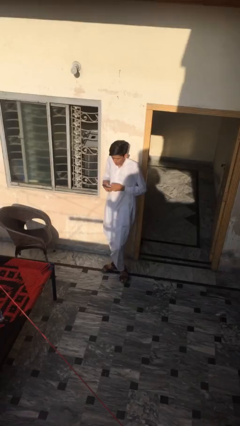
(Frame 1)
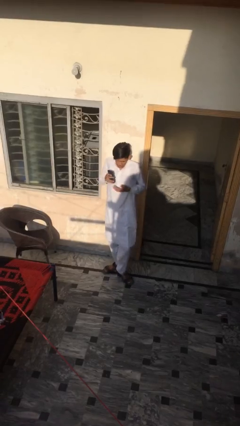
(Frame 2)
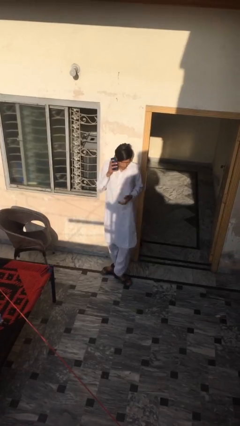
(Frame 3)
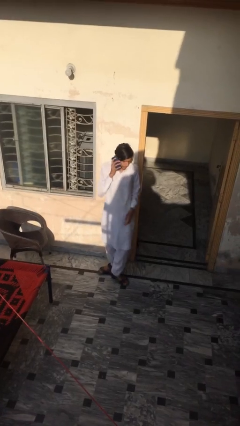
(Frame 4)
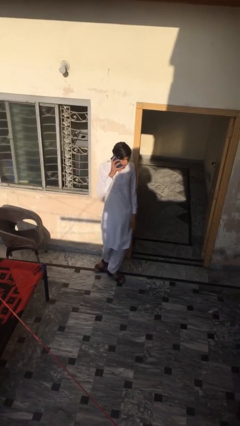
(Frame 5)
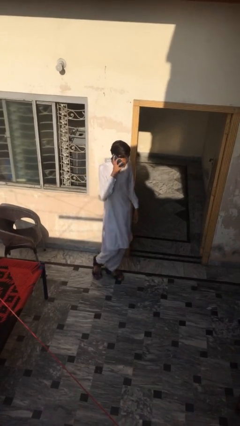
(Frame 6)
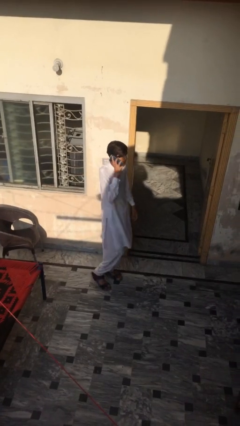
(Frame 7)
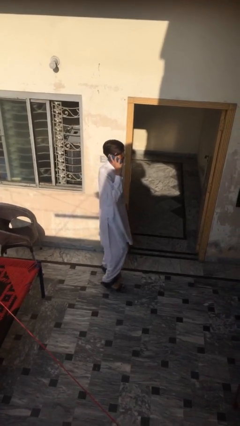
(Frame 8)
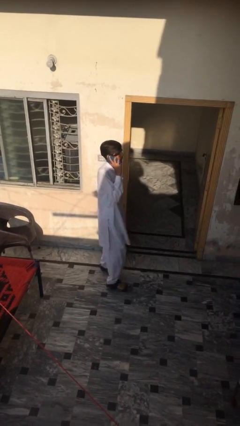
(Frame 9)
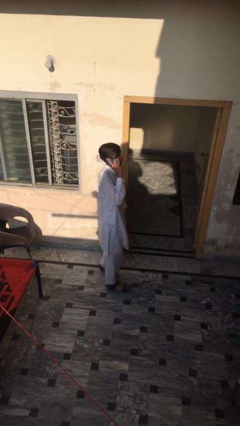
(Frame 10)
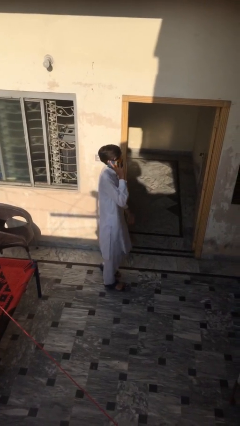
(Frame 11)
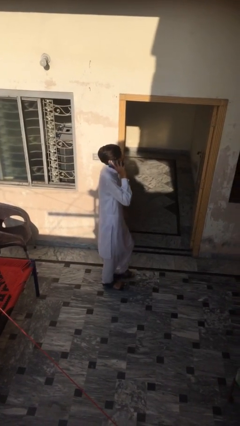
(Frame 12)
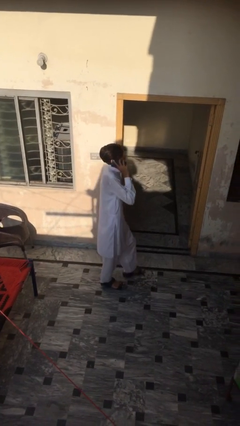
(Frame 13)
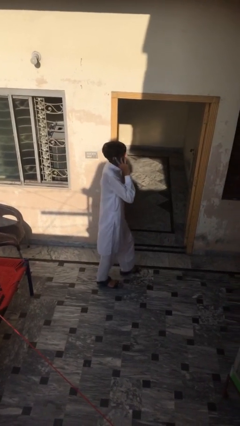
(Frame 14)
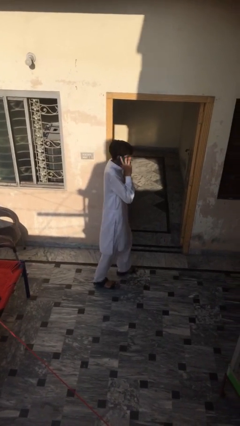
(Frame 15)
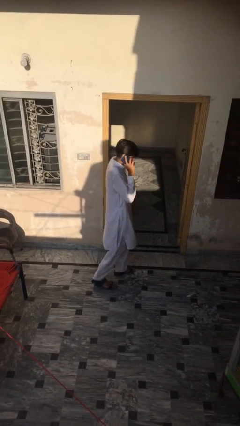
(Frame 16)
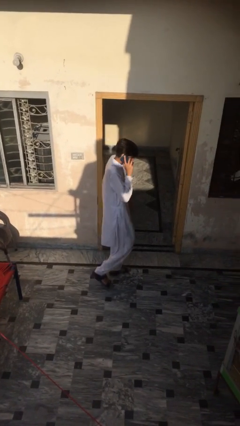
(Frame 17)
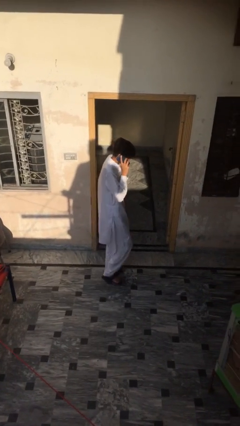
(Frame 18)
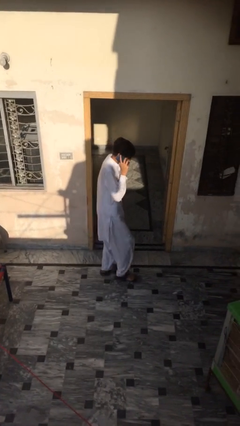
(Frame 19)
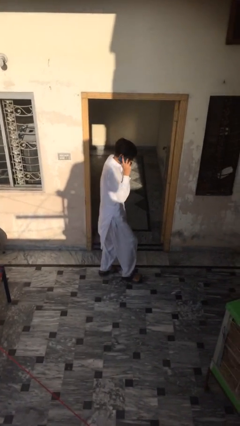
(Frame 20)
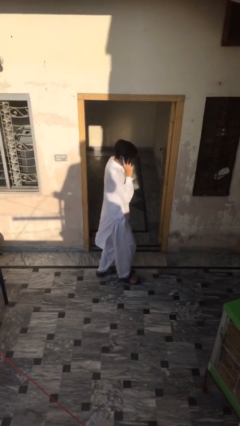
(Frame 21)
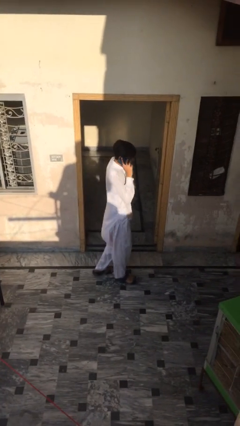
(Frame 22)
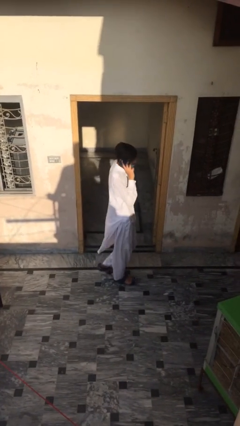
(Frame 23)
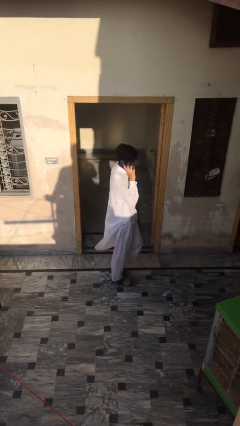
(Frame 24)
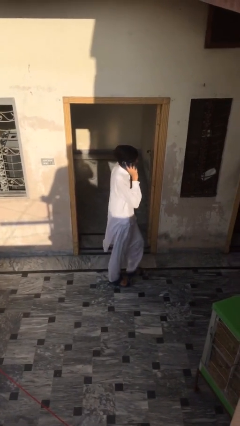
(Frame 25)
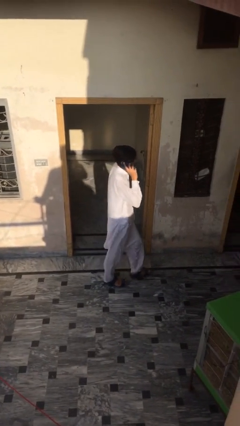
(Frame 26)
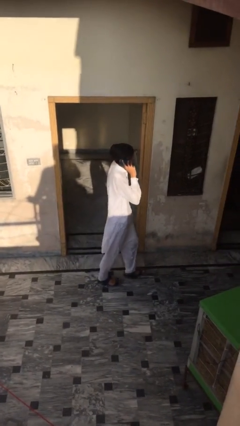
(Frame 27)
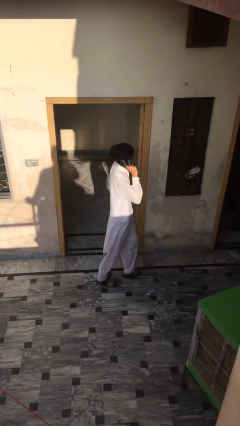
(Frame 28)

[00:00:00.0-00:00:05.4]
person talks on phone

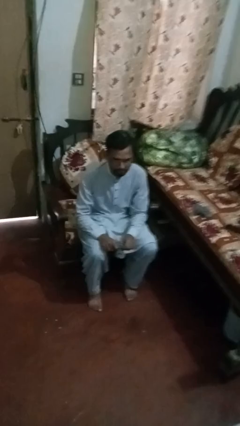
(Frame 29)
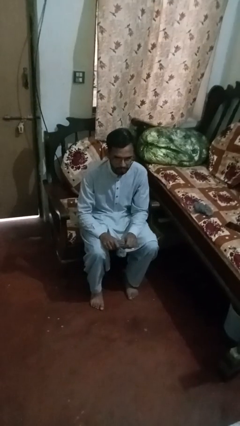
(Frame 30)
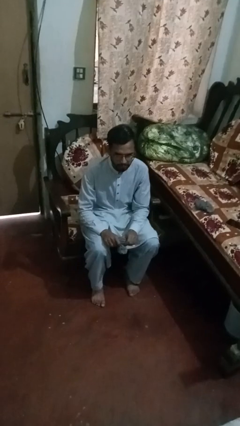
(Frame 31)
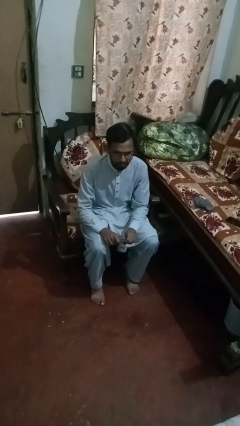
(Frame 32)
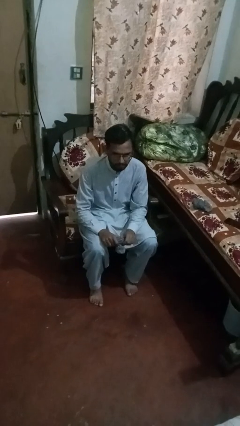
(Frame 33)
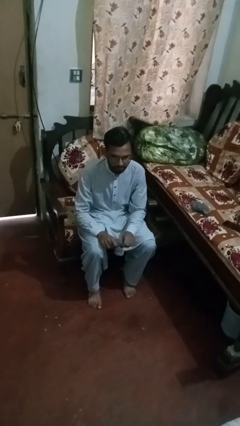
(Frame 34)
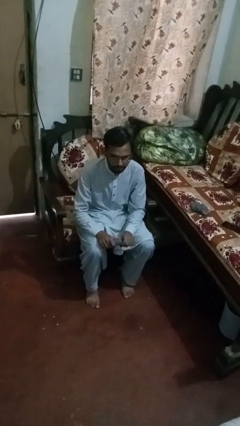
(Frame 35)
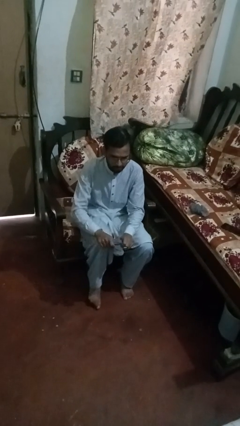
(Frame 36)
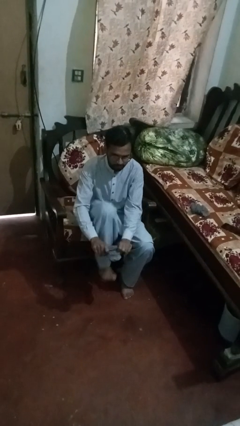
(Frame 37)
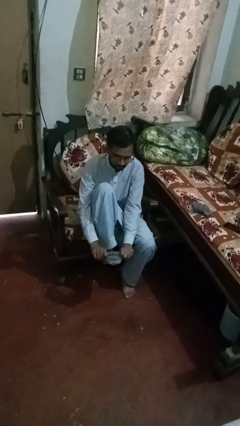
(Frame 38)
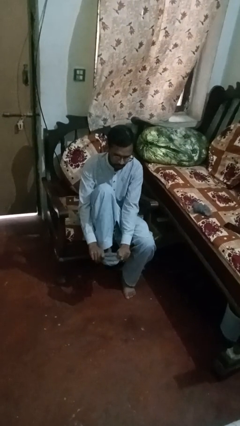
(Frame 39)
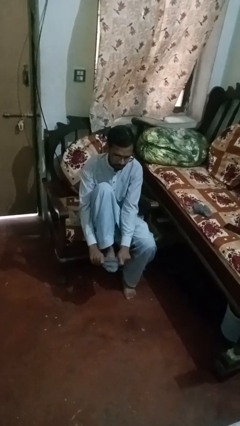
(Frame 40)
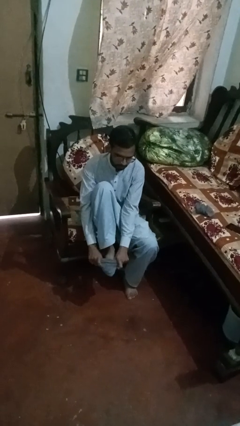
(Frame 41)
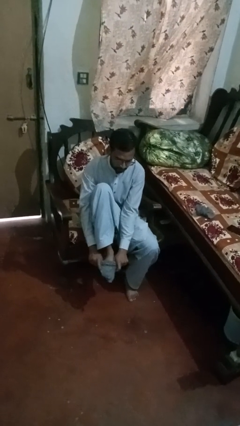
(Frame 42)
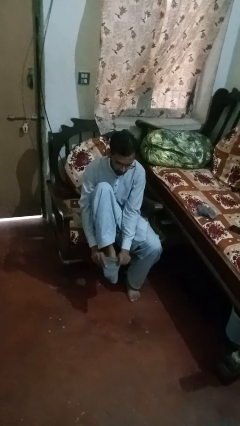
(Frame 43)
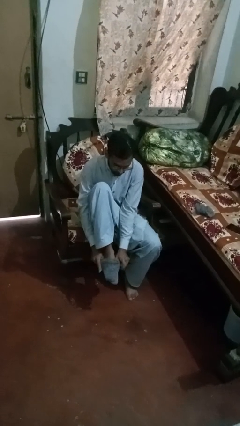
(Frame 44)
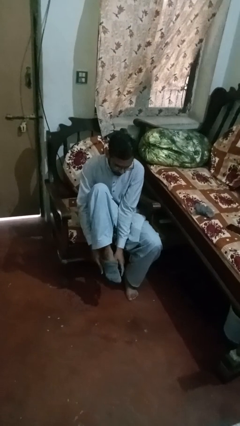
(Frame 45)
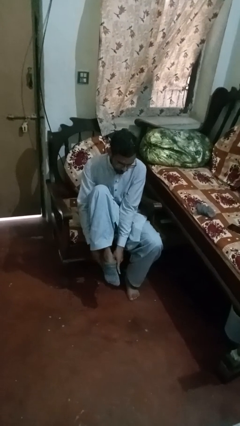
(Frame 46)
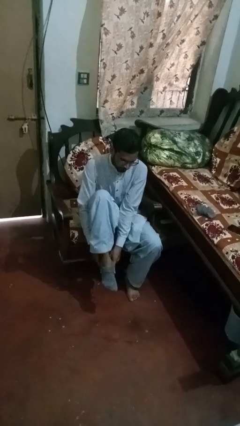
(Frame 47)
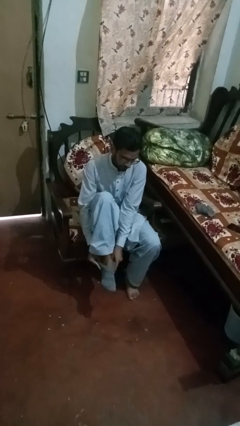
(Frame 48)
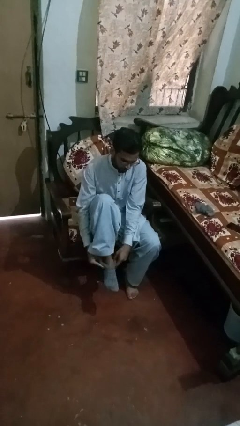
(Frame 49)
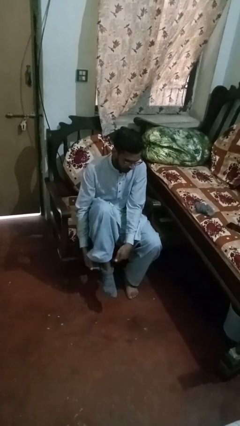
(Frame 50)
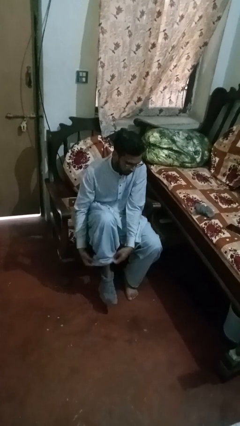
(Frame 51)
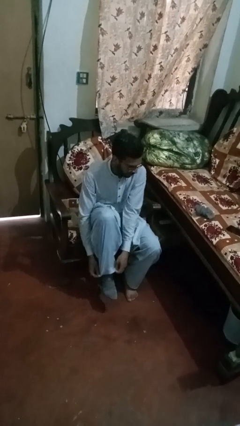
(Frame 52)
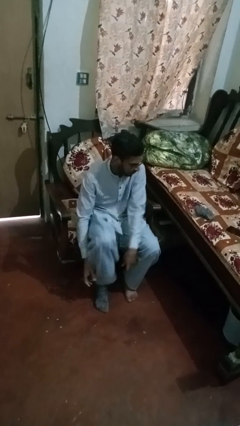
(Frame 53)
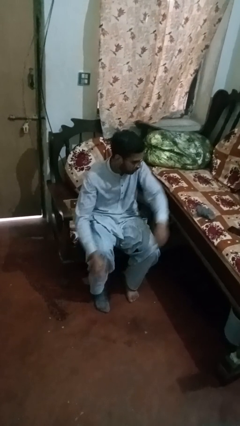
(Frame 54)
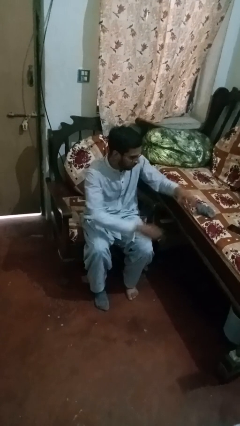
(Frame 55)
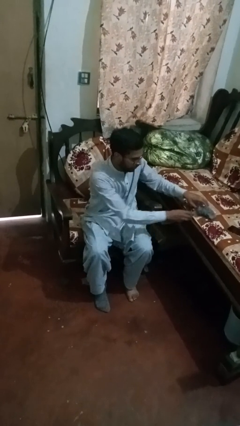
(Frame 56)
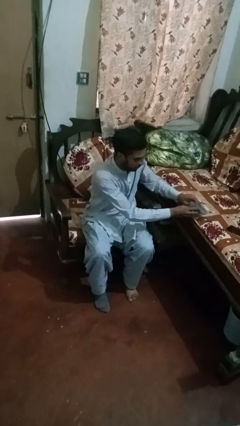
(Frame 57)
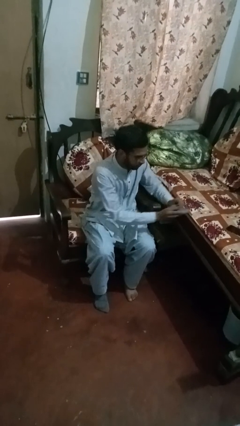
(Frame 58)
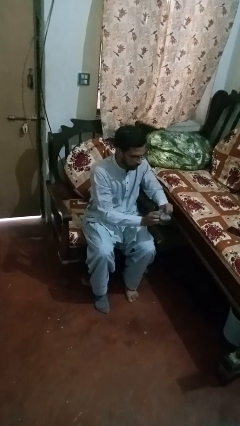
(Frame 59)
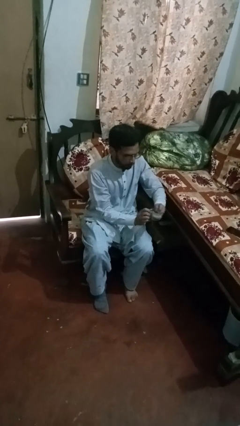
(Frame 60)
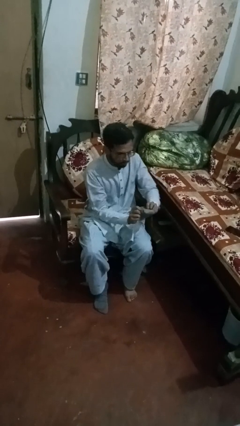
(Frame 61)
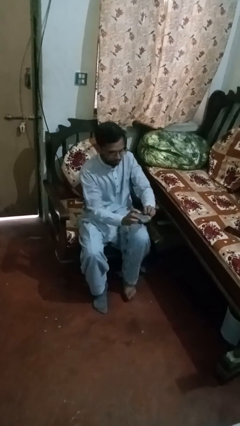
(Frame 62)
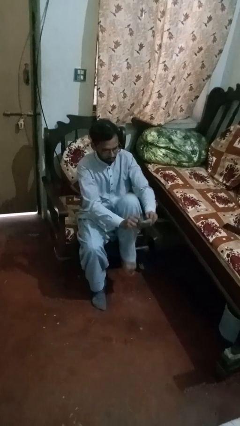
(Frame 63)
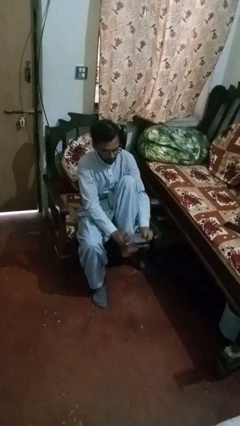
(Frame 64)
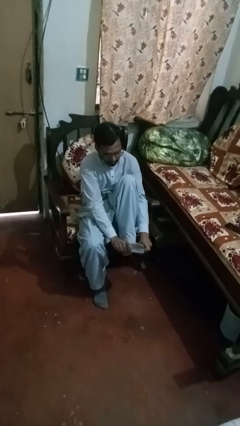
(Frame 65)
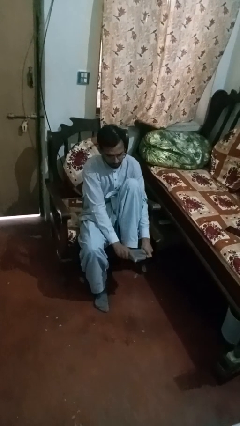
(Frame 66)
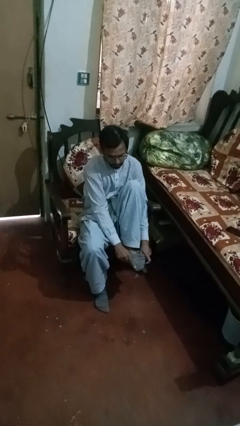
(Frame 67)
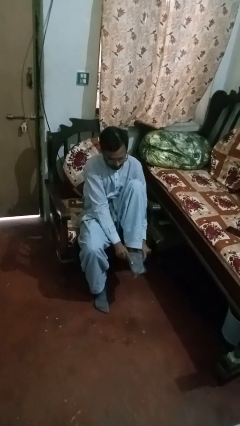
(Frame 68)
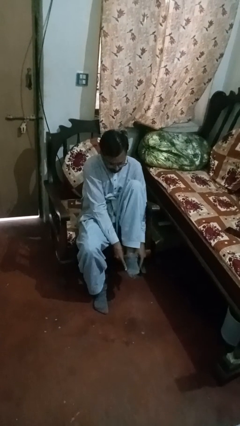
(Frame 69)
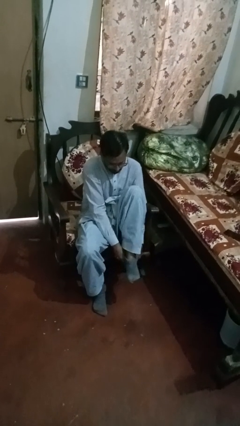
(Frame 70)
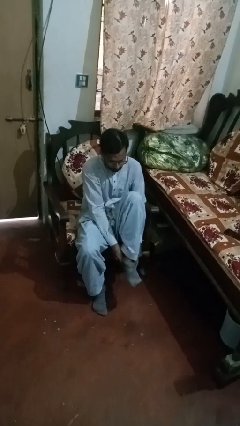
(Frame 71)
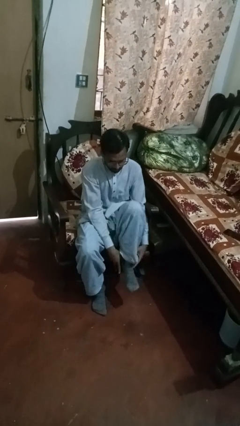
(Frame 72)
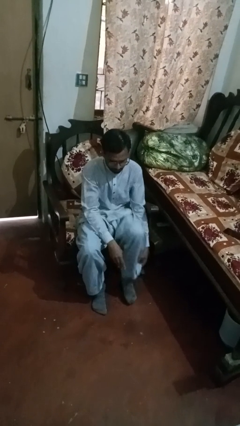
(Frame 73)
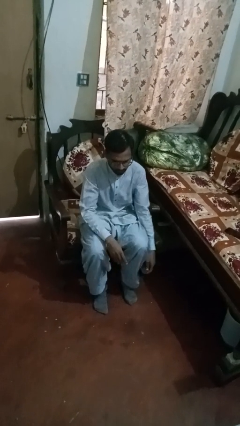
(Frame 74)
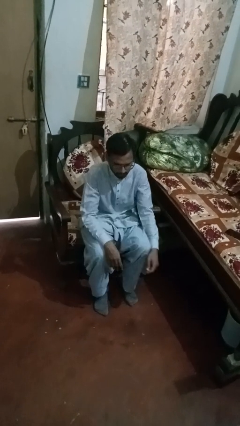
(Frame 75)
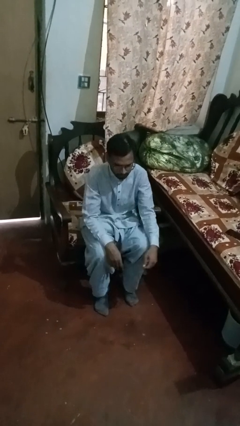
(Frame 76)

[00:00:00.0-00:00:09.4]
person puts on socks

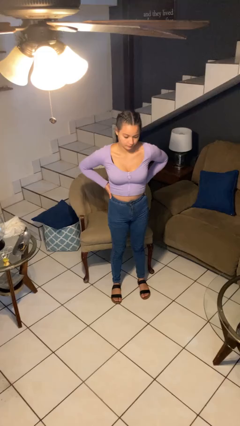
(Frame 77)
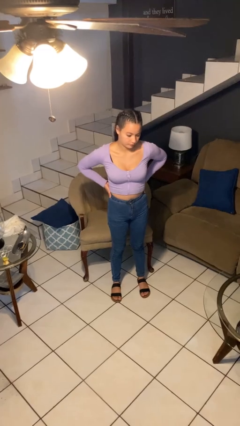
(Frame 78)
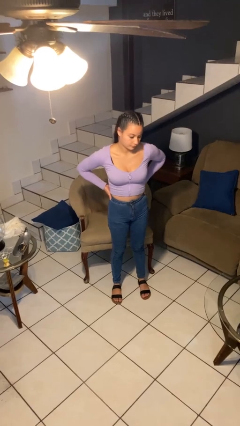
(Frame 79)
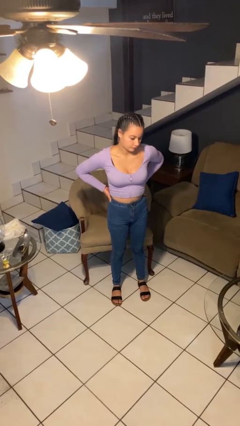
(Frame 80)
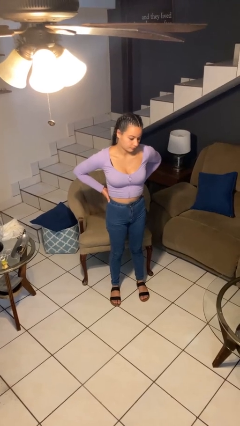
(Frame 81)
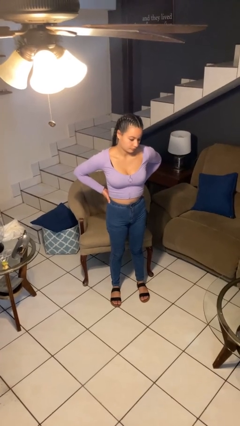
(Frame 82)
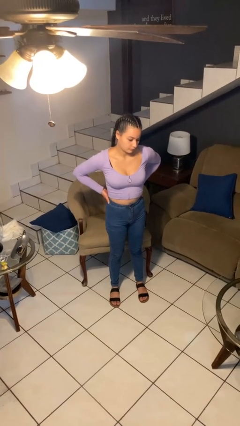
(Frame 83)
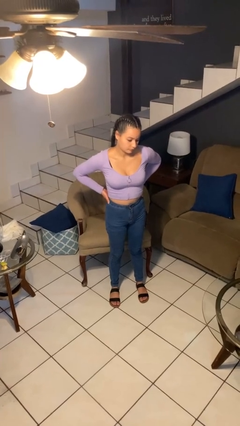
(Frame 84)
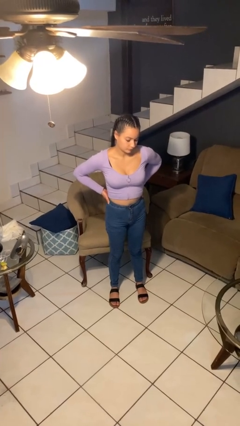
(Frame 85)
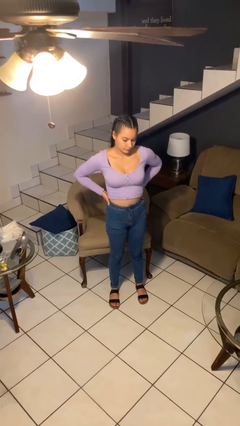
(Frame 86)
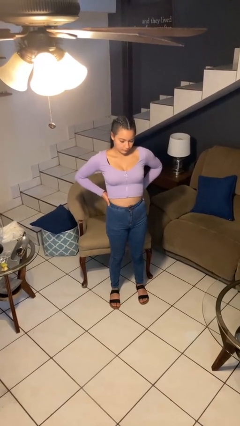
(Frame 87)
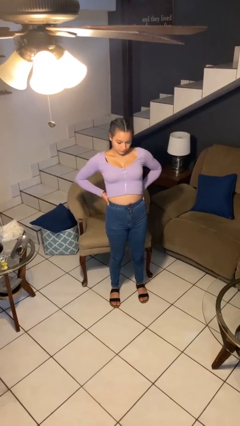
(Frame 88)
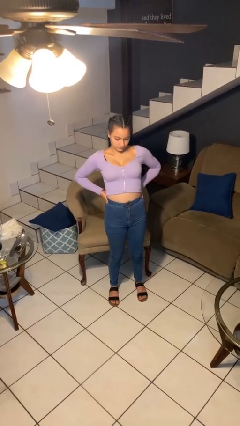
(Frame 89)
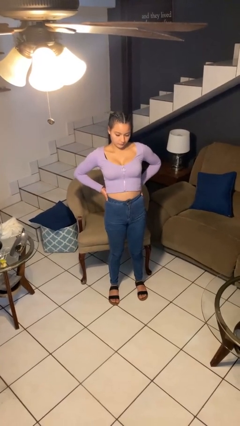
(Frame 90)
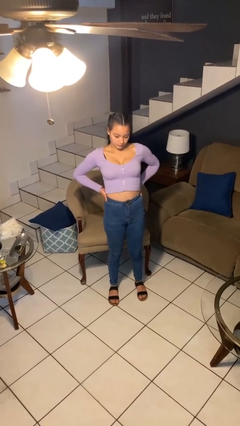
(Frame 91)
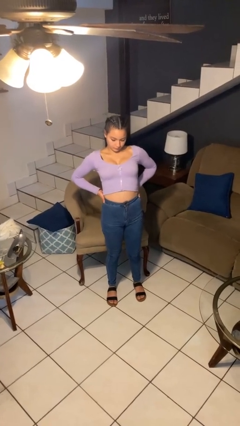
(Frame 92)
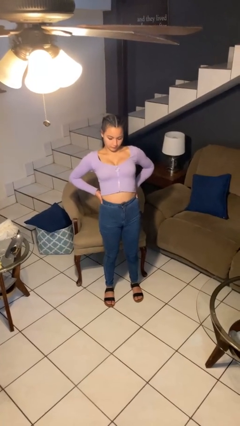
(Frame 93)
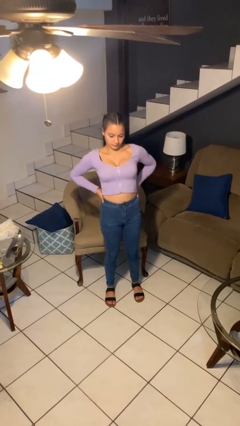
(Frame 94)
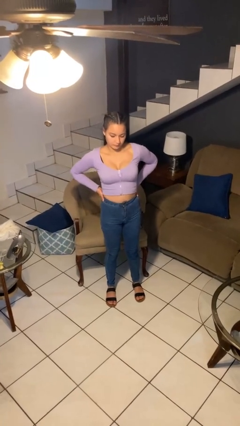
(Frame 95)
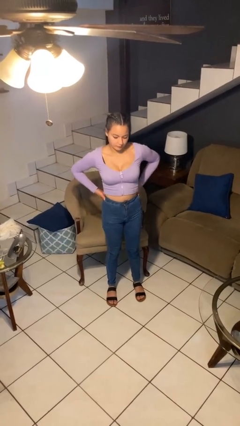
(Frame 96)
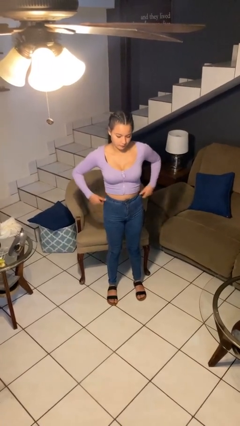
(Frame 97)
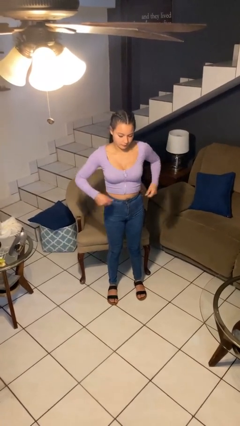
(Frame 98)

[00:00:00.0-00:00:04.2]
person stretches back
